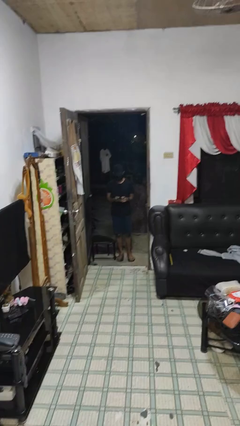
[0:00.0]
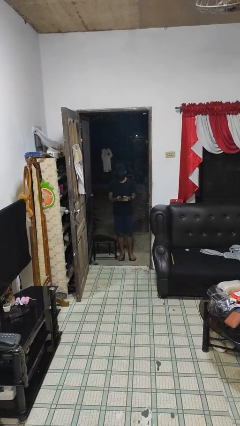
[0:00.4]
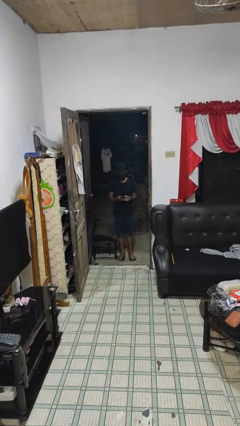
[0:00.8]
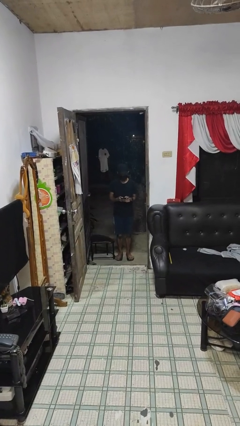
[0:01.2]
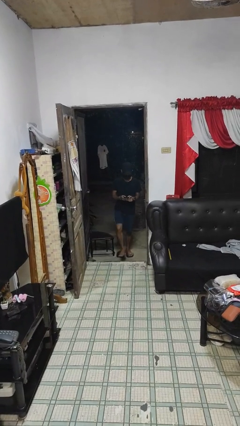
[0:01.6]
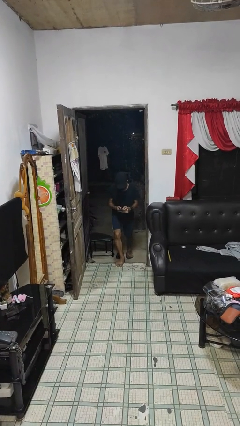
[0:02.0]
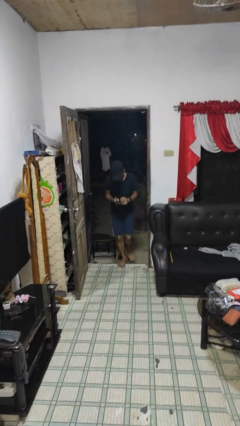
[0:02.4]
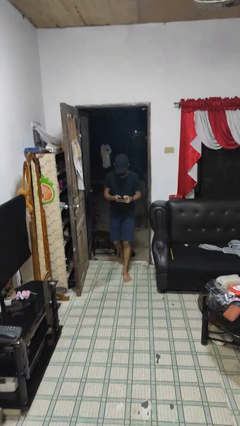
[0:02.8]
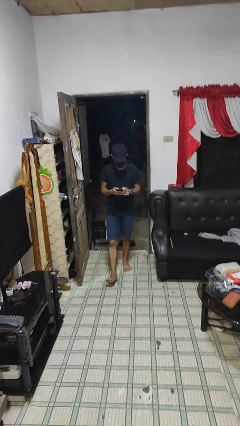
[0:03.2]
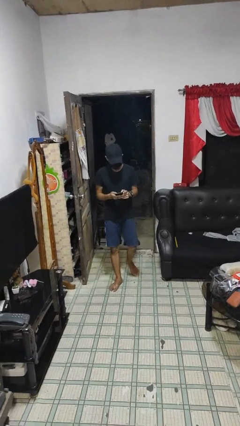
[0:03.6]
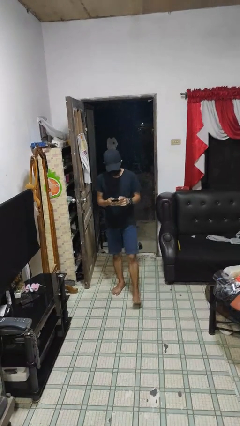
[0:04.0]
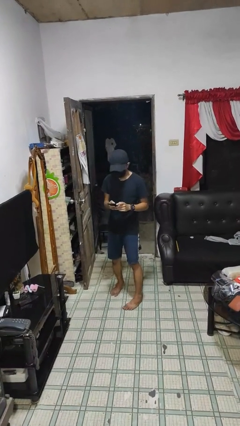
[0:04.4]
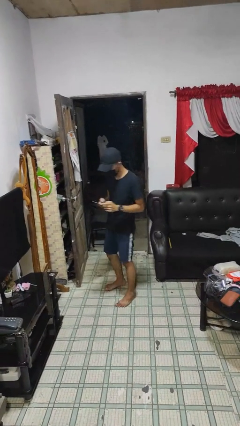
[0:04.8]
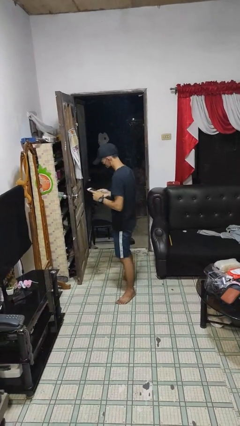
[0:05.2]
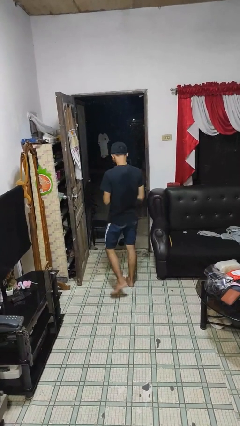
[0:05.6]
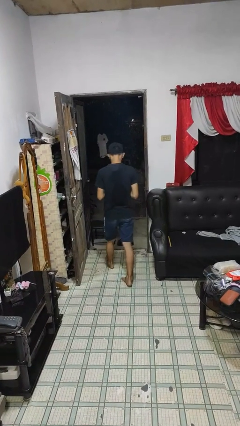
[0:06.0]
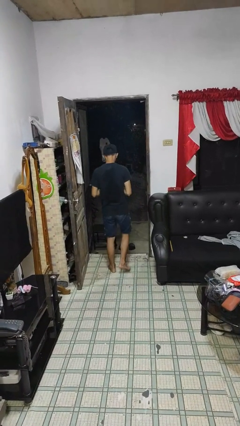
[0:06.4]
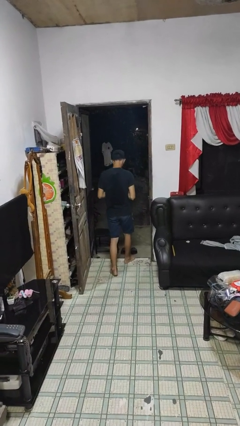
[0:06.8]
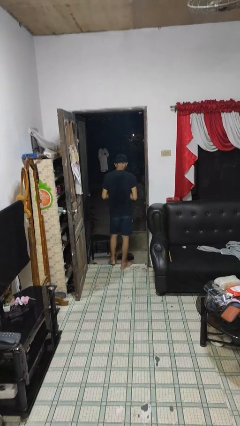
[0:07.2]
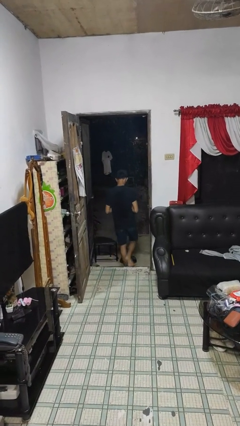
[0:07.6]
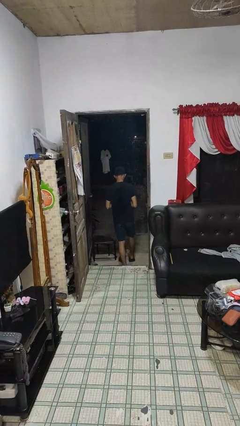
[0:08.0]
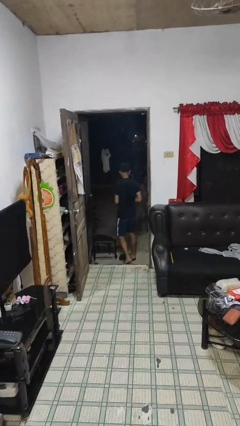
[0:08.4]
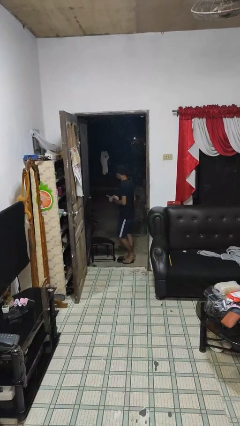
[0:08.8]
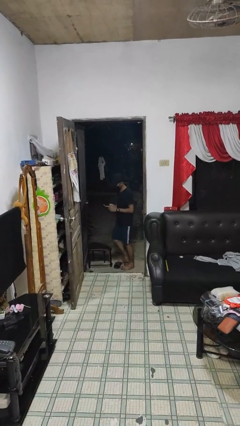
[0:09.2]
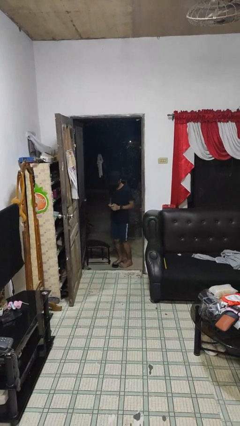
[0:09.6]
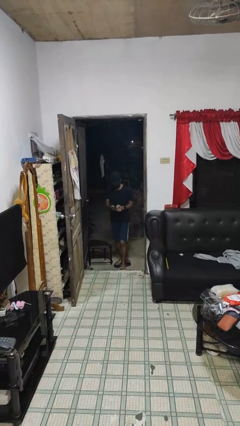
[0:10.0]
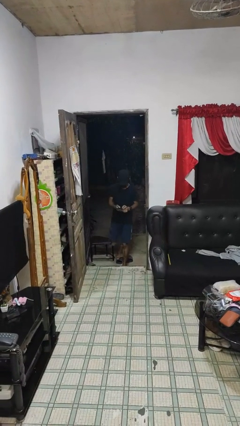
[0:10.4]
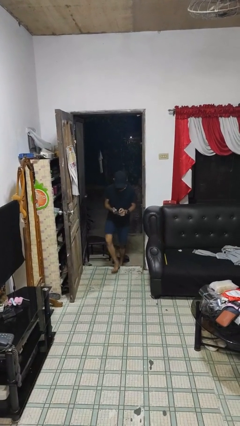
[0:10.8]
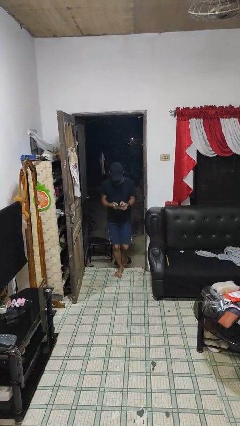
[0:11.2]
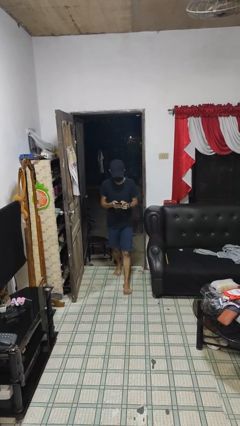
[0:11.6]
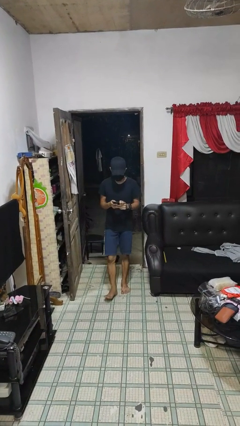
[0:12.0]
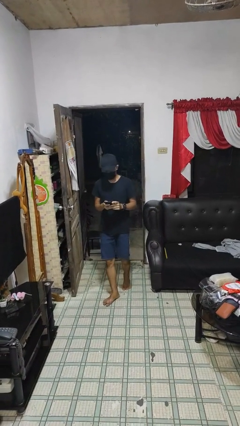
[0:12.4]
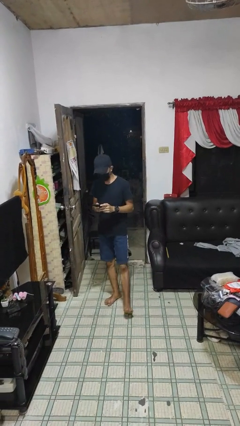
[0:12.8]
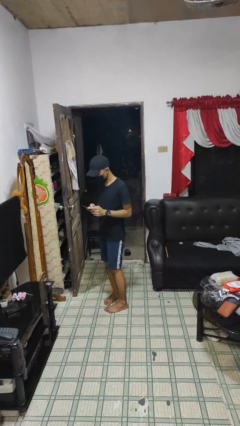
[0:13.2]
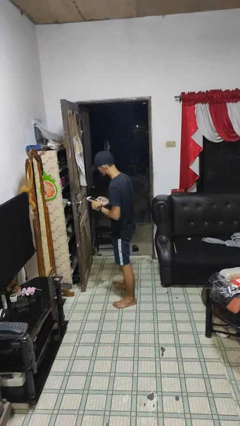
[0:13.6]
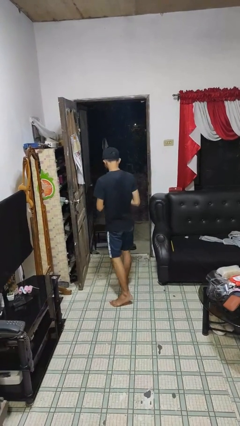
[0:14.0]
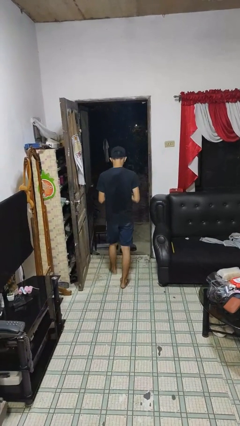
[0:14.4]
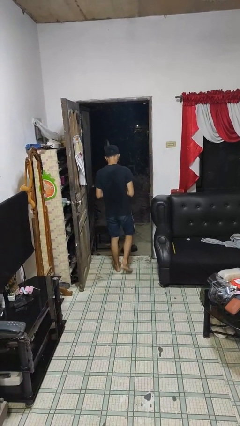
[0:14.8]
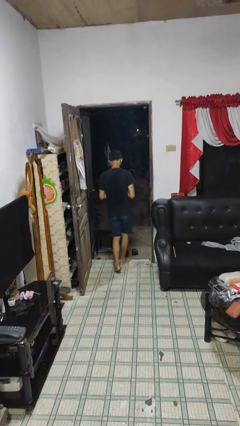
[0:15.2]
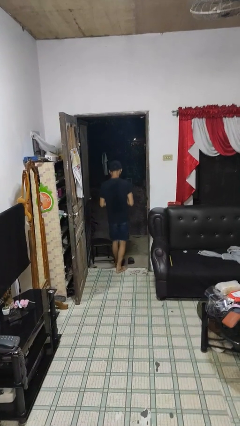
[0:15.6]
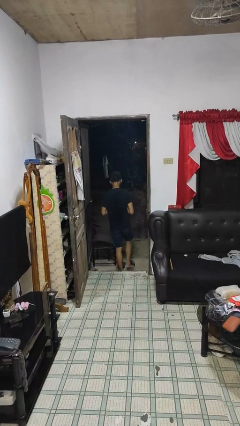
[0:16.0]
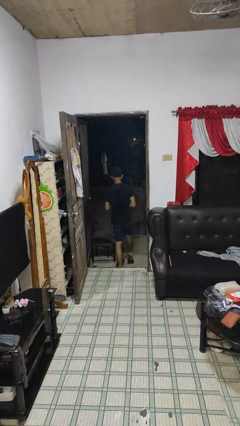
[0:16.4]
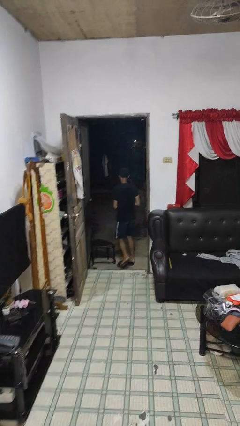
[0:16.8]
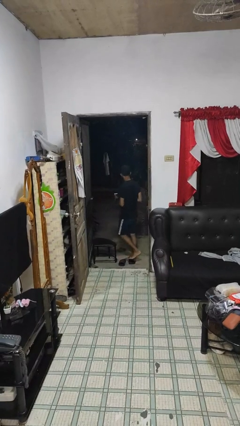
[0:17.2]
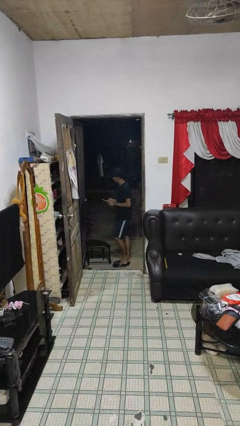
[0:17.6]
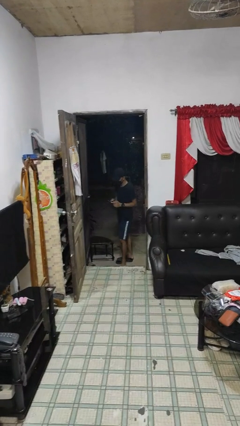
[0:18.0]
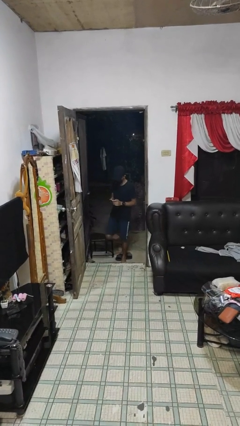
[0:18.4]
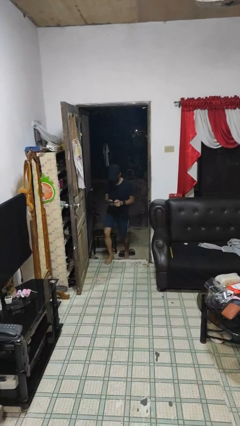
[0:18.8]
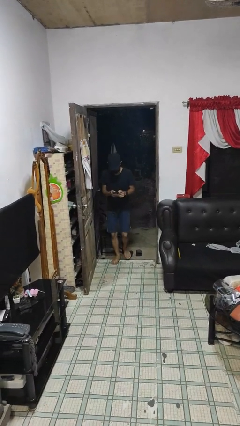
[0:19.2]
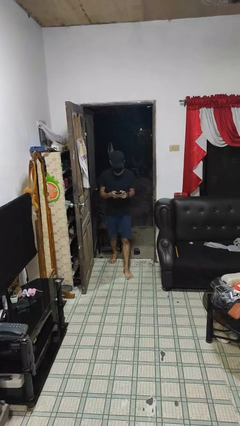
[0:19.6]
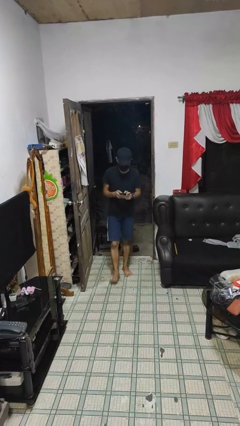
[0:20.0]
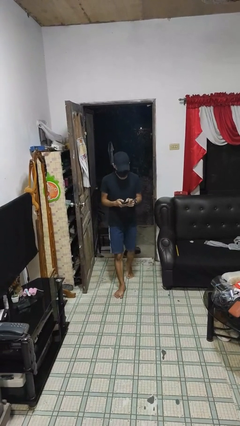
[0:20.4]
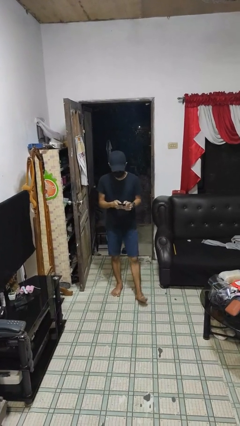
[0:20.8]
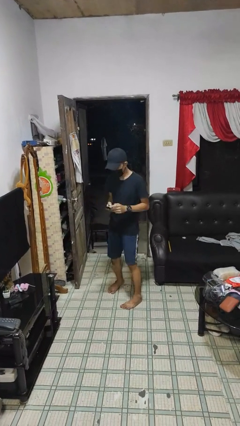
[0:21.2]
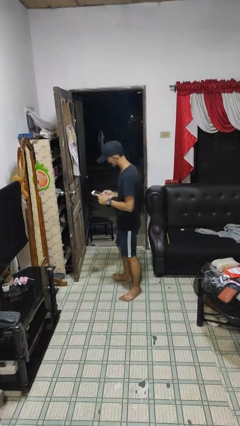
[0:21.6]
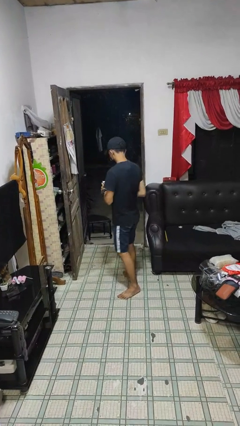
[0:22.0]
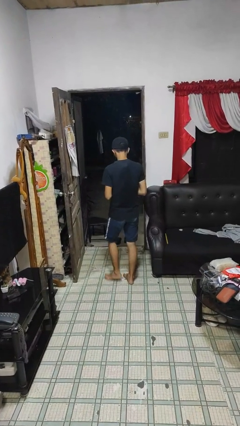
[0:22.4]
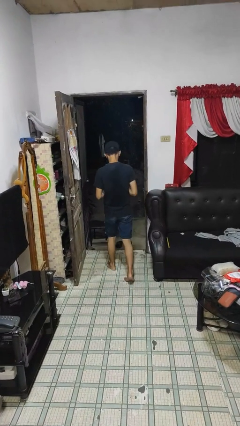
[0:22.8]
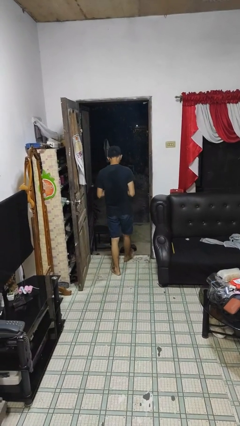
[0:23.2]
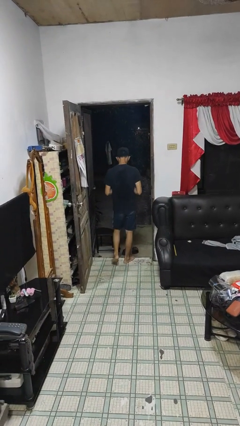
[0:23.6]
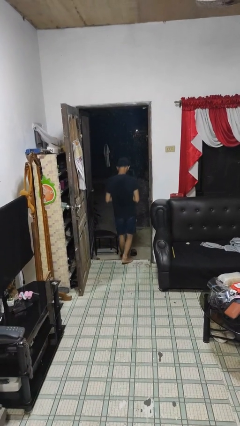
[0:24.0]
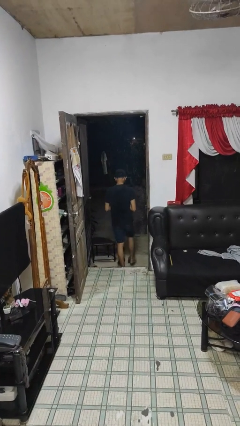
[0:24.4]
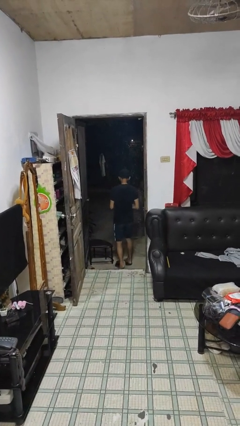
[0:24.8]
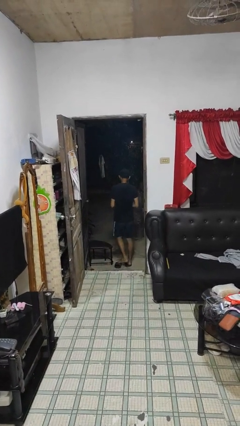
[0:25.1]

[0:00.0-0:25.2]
person texts on phone

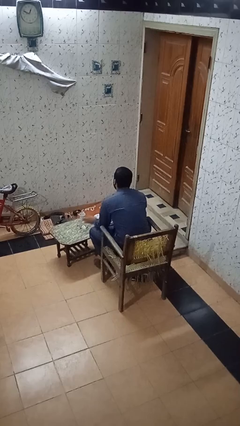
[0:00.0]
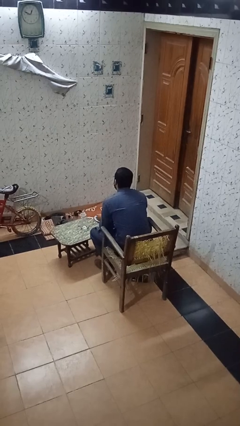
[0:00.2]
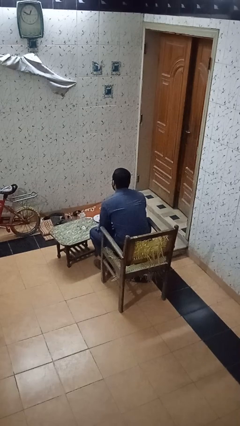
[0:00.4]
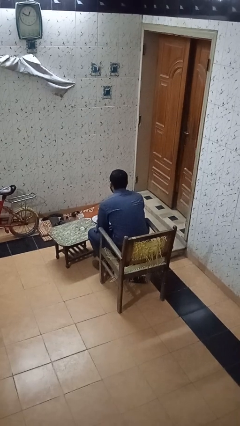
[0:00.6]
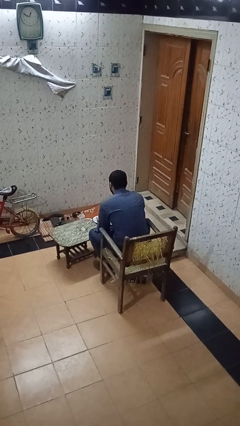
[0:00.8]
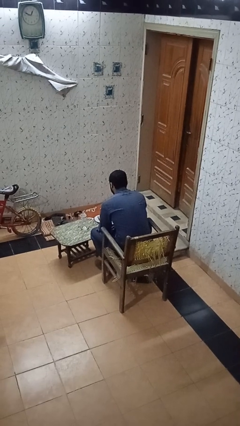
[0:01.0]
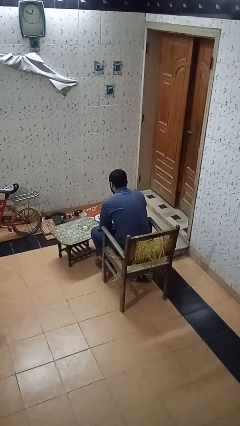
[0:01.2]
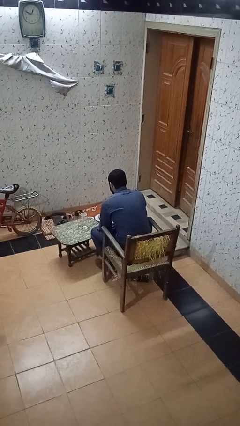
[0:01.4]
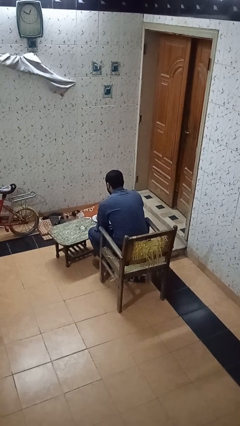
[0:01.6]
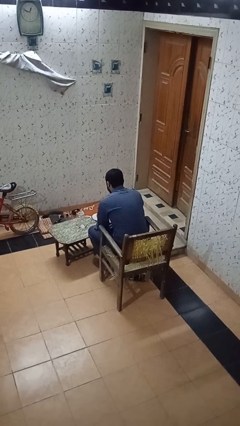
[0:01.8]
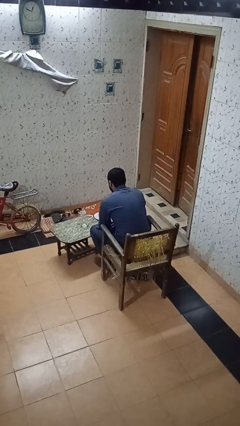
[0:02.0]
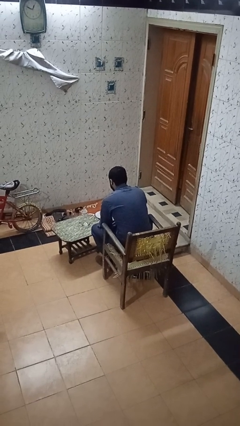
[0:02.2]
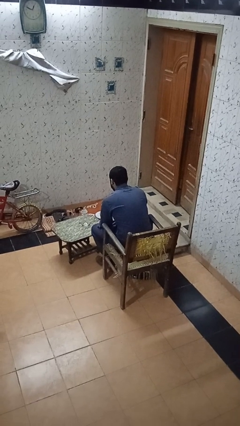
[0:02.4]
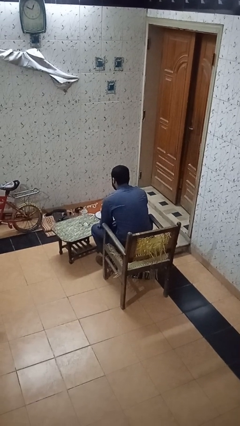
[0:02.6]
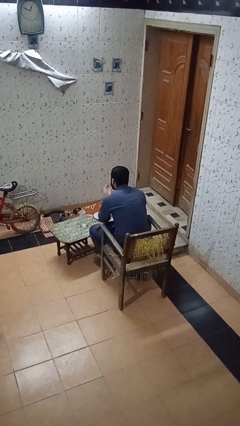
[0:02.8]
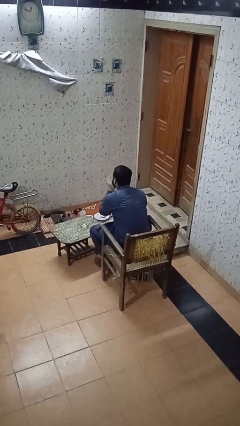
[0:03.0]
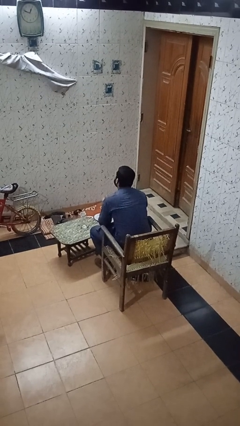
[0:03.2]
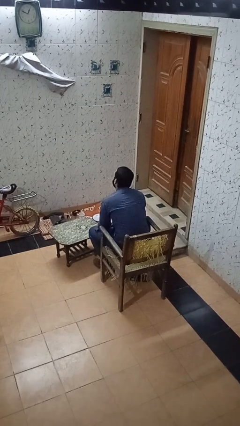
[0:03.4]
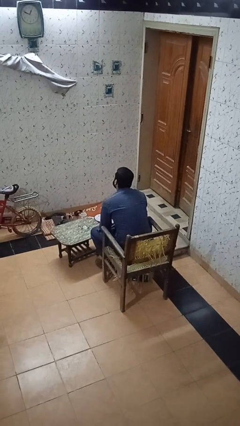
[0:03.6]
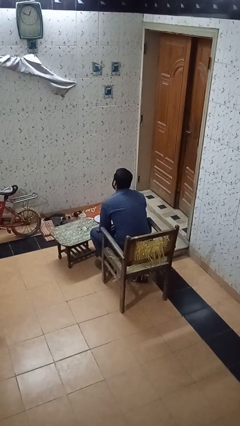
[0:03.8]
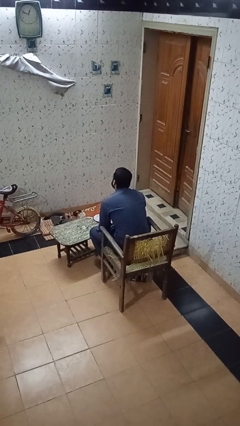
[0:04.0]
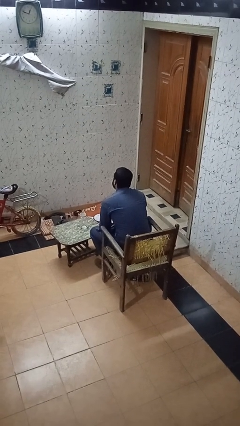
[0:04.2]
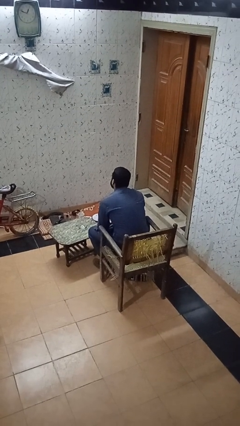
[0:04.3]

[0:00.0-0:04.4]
person takes medicine pills

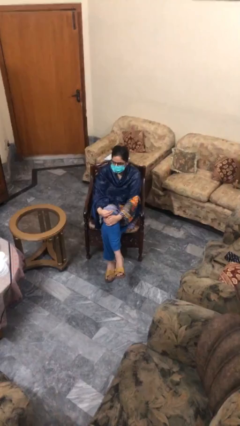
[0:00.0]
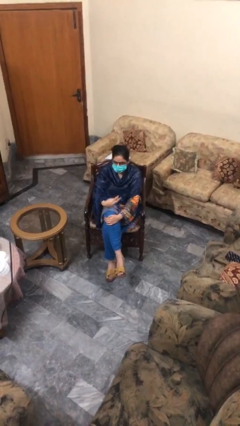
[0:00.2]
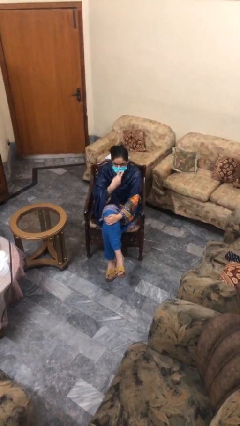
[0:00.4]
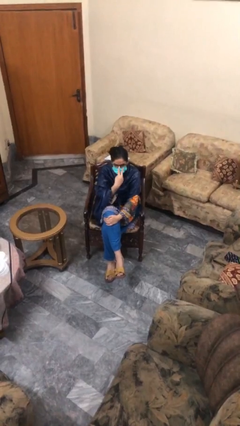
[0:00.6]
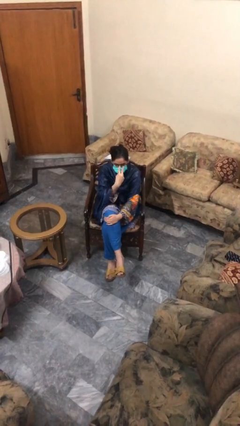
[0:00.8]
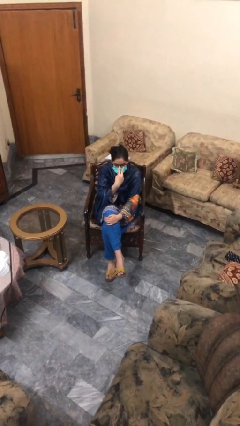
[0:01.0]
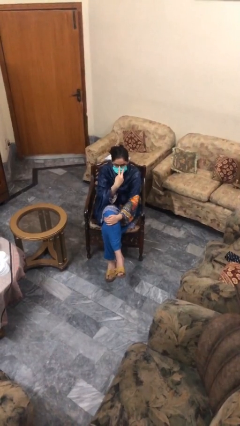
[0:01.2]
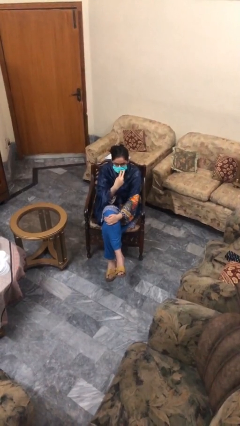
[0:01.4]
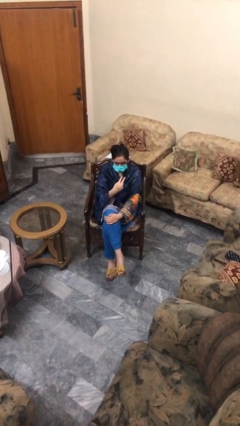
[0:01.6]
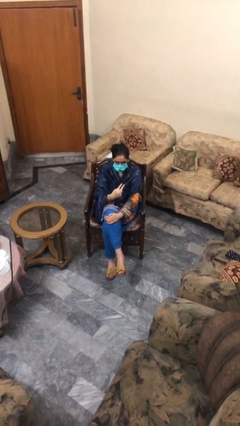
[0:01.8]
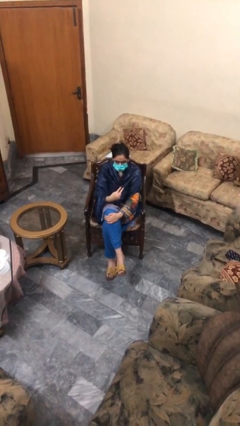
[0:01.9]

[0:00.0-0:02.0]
person gestures watch closely
